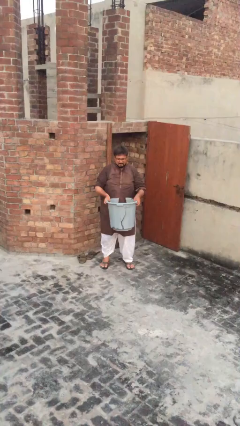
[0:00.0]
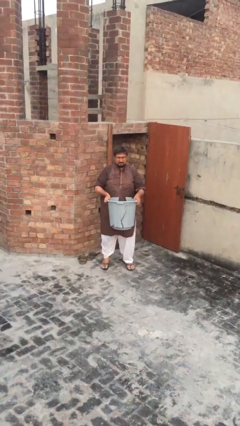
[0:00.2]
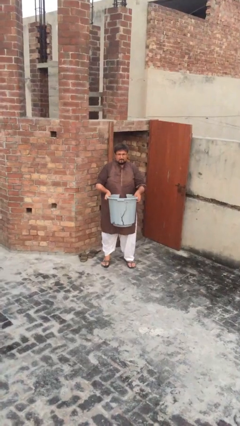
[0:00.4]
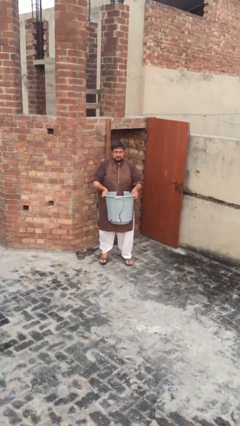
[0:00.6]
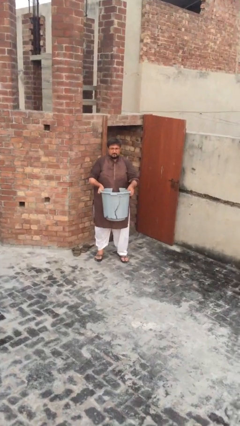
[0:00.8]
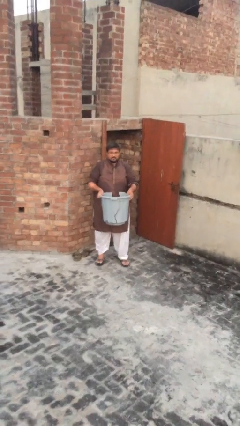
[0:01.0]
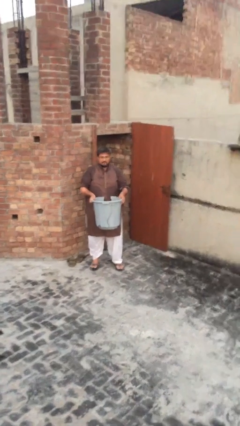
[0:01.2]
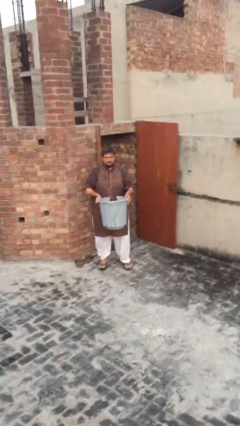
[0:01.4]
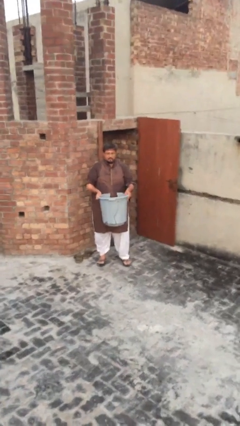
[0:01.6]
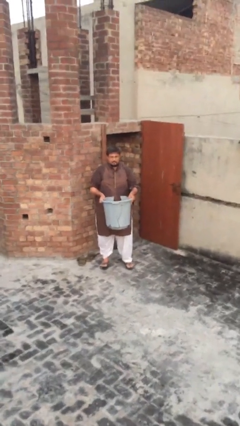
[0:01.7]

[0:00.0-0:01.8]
person picks up object from floor

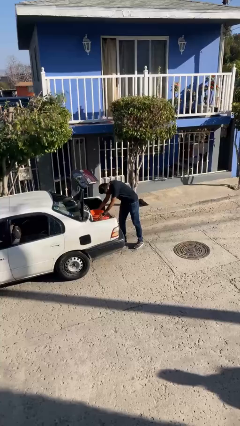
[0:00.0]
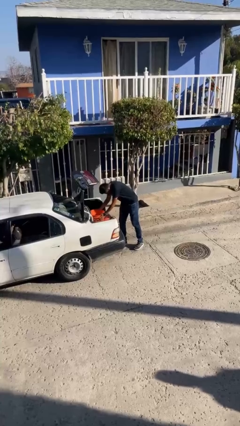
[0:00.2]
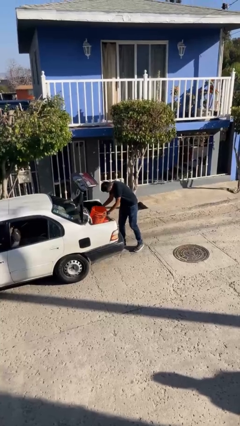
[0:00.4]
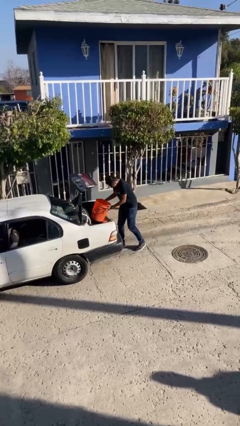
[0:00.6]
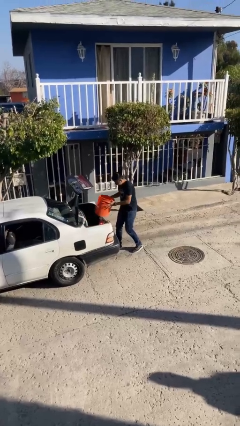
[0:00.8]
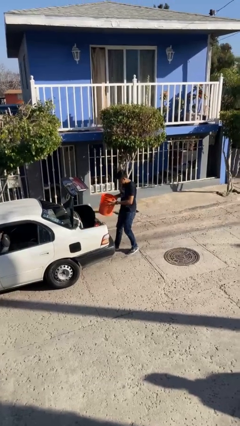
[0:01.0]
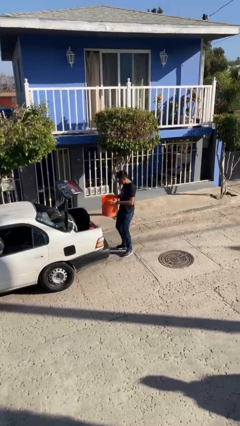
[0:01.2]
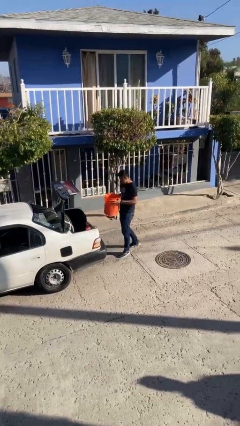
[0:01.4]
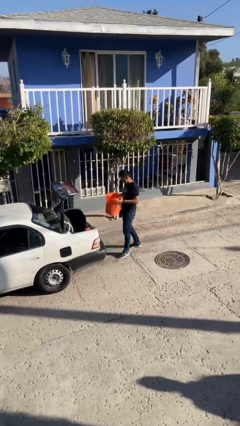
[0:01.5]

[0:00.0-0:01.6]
person unloads car

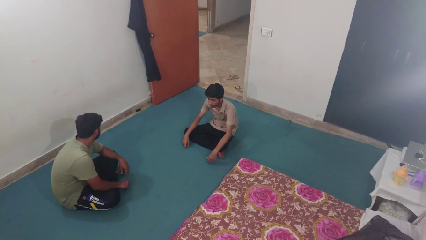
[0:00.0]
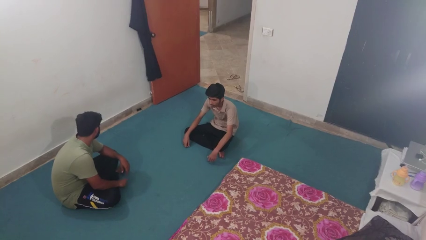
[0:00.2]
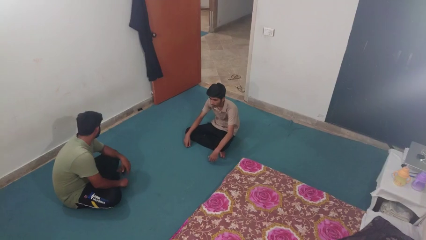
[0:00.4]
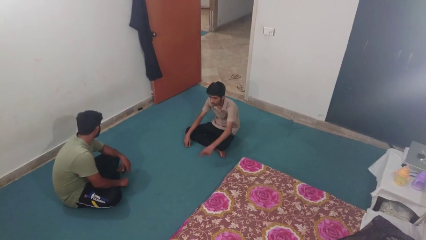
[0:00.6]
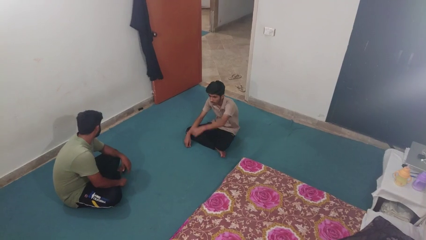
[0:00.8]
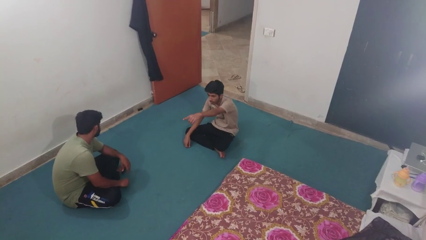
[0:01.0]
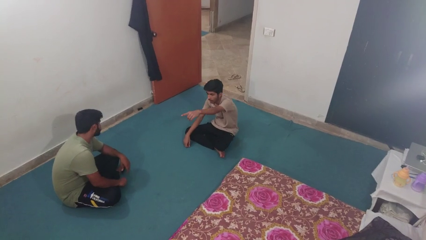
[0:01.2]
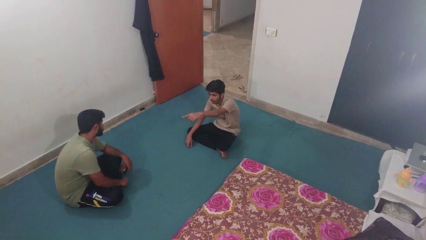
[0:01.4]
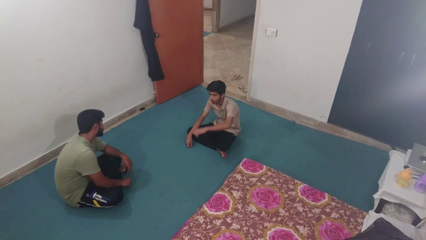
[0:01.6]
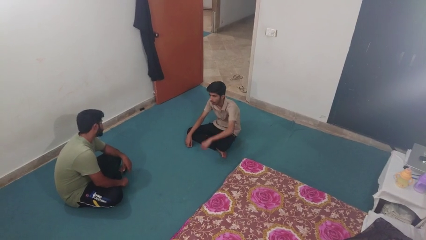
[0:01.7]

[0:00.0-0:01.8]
person points at person

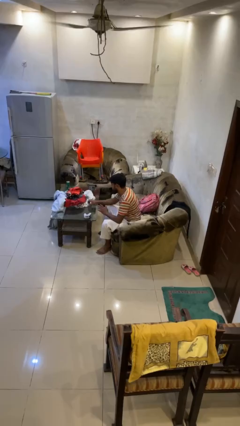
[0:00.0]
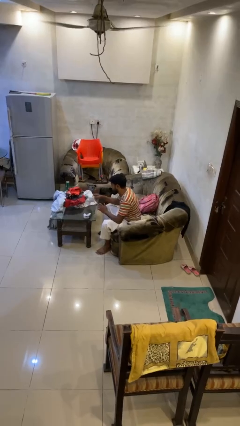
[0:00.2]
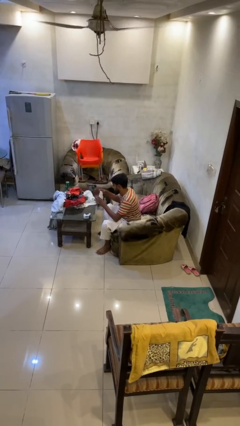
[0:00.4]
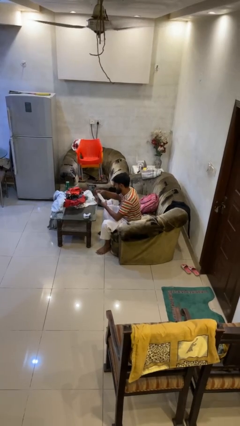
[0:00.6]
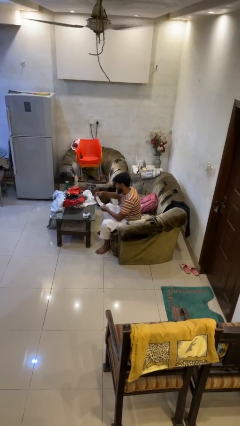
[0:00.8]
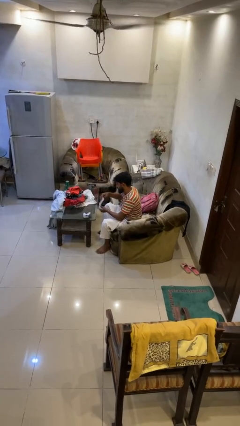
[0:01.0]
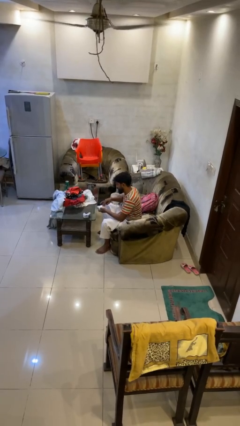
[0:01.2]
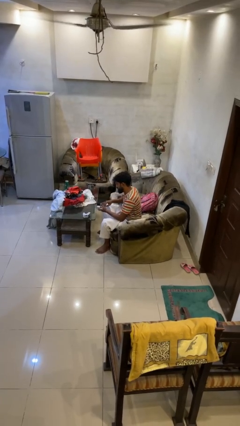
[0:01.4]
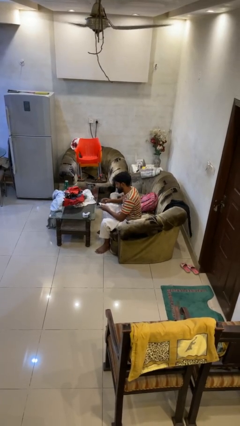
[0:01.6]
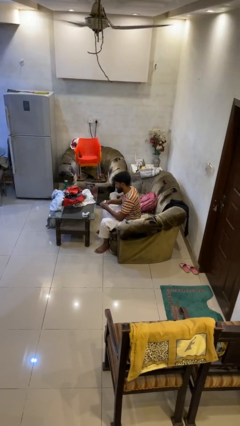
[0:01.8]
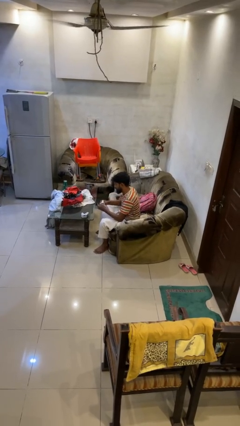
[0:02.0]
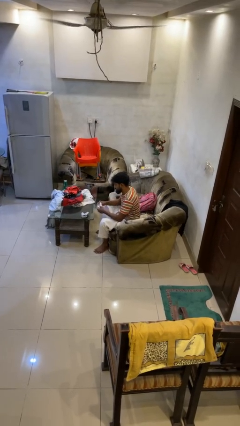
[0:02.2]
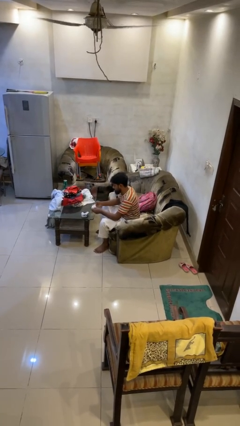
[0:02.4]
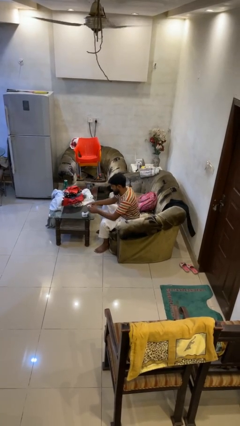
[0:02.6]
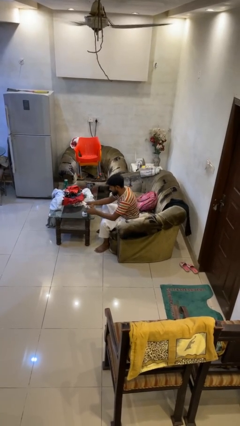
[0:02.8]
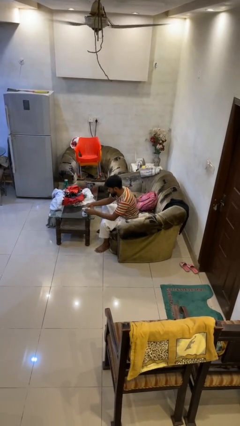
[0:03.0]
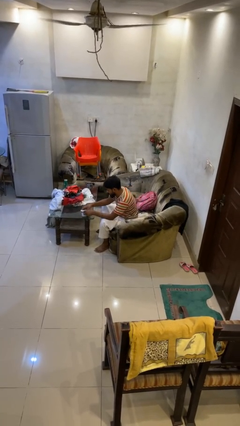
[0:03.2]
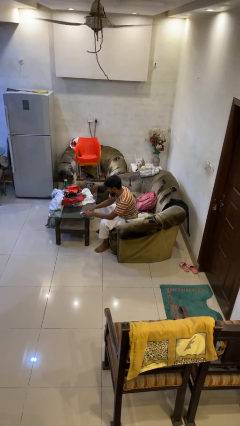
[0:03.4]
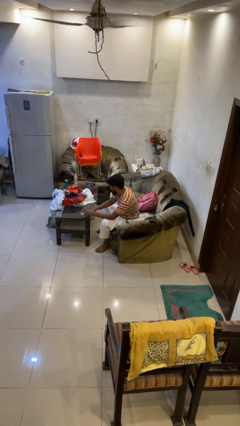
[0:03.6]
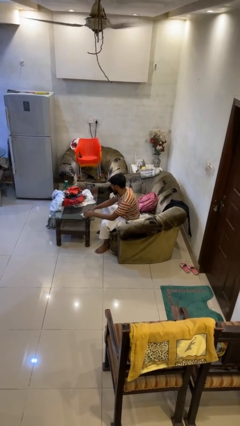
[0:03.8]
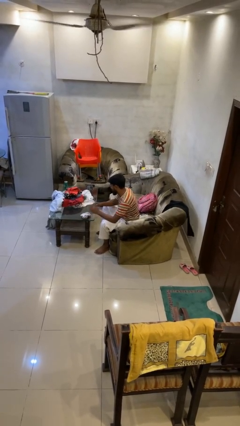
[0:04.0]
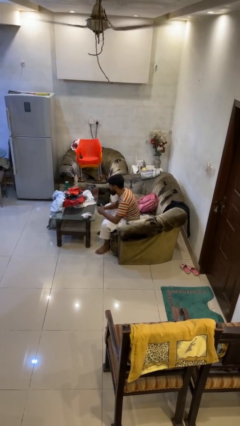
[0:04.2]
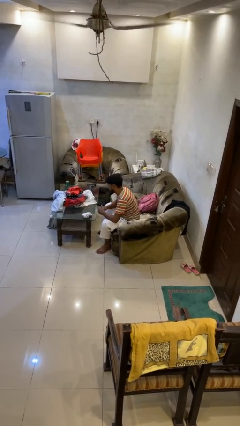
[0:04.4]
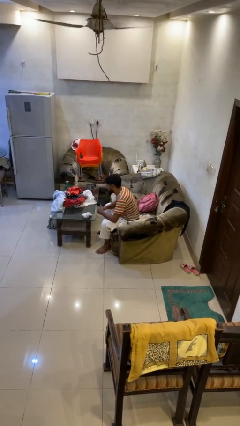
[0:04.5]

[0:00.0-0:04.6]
person folds socks

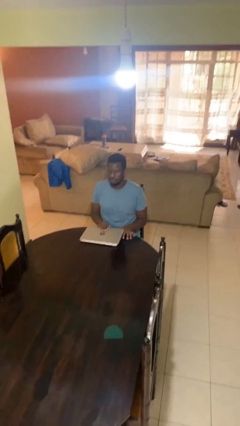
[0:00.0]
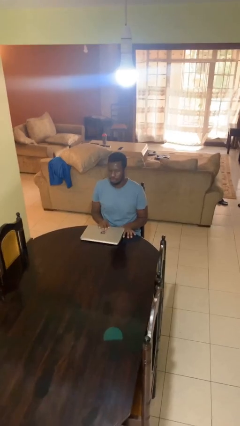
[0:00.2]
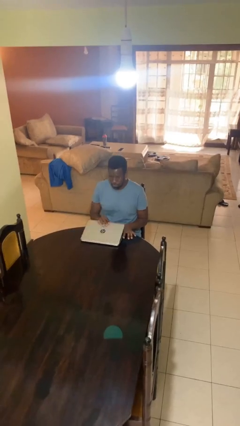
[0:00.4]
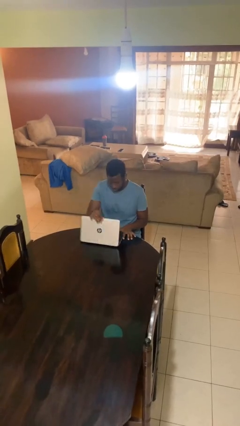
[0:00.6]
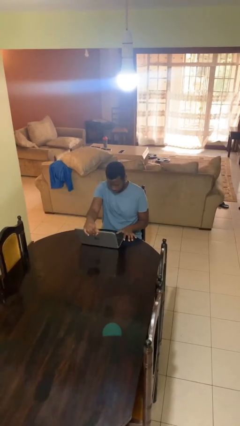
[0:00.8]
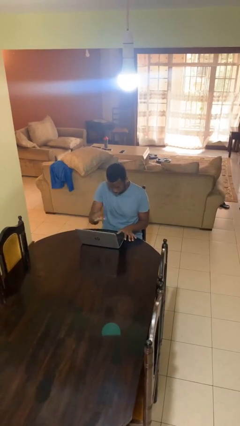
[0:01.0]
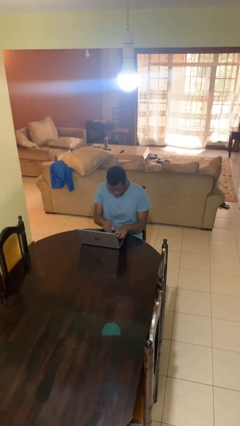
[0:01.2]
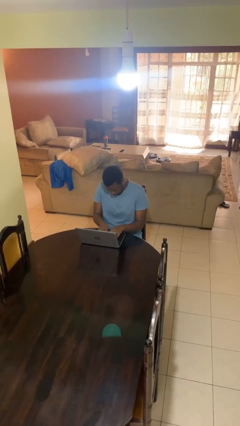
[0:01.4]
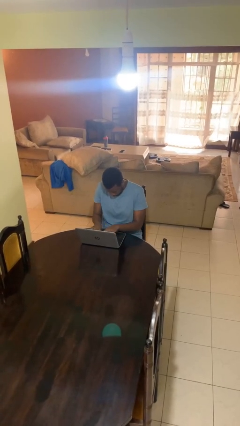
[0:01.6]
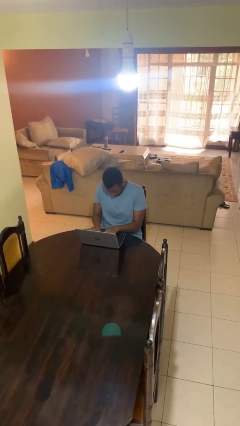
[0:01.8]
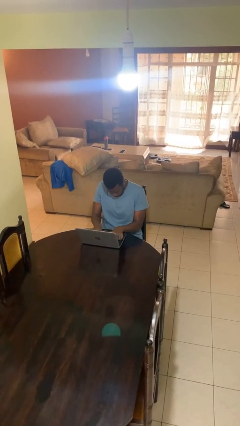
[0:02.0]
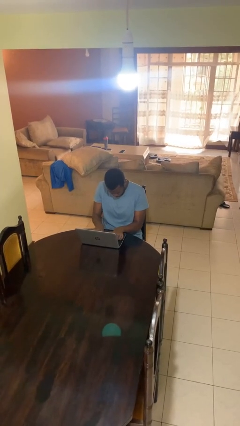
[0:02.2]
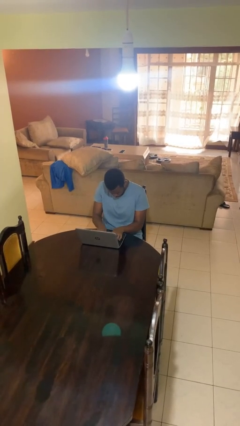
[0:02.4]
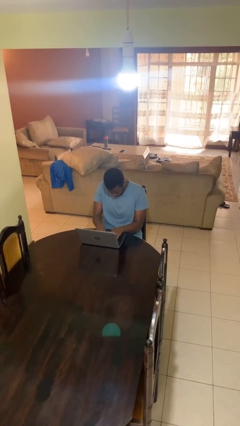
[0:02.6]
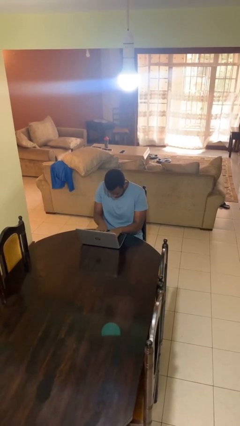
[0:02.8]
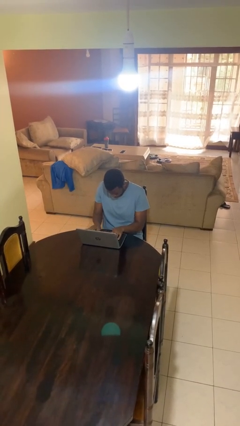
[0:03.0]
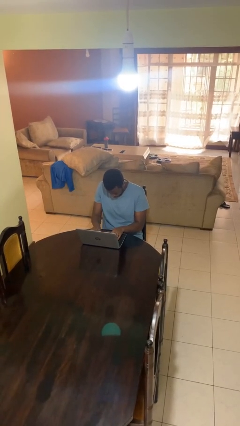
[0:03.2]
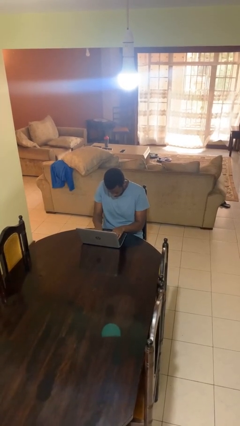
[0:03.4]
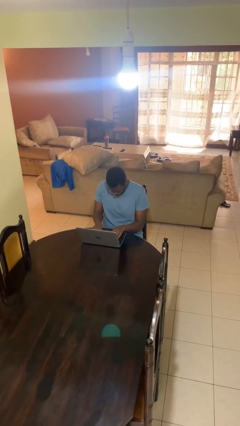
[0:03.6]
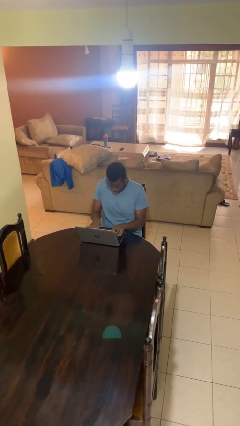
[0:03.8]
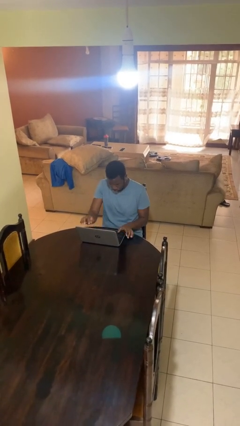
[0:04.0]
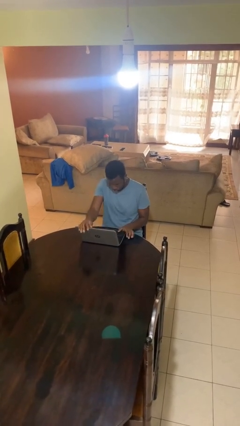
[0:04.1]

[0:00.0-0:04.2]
person interacts with laptop

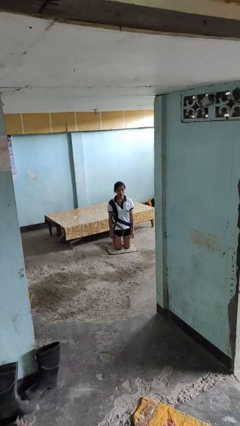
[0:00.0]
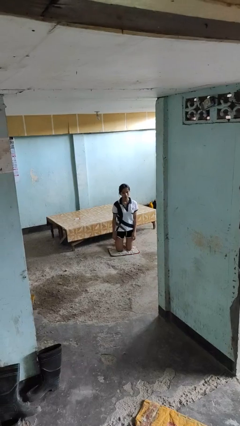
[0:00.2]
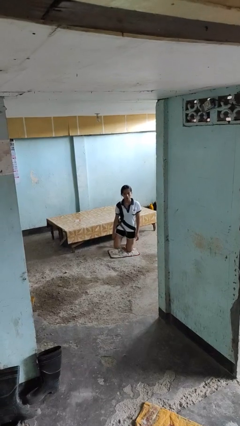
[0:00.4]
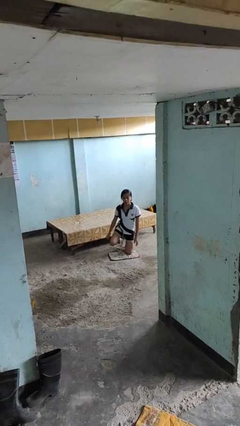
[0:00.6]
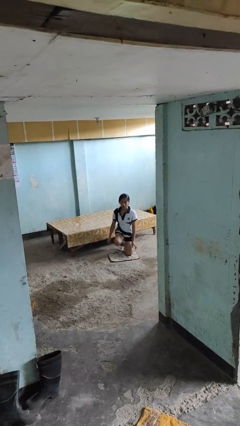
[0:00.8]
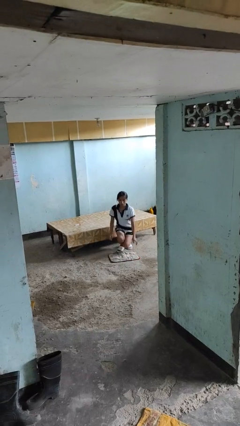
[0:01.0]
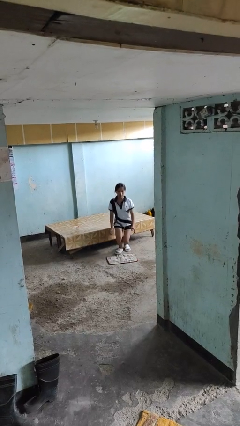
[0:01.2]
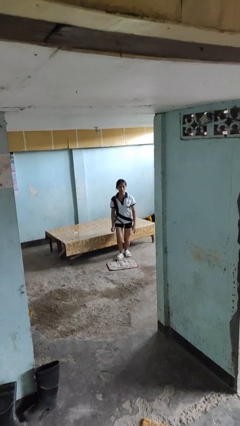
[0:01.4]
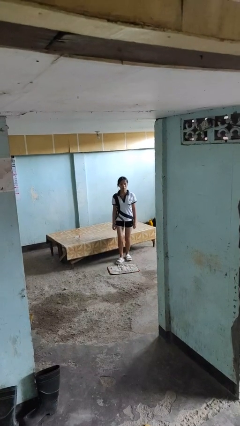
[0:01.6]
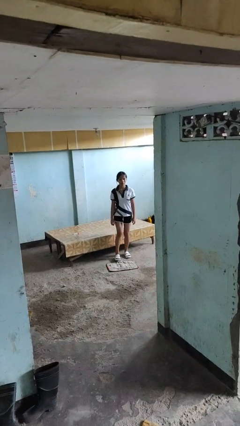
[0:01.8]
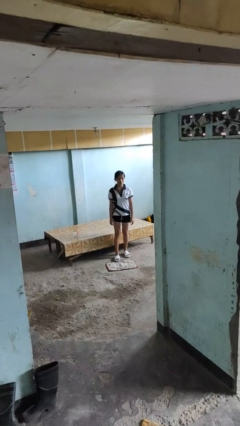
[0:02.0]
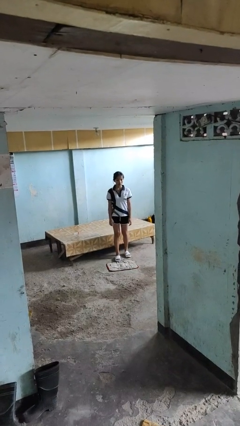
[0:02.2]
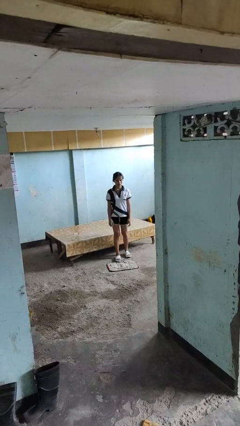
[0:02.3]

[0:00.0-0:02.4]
person stands up from floor

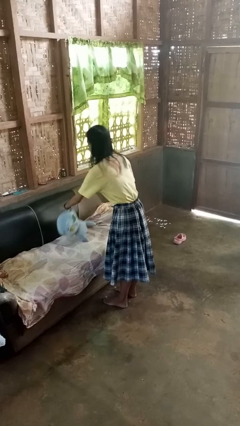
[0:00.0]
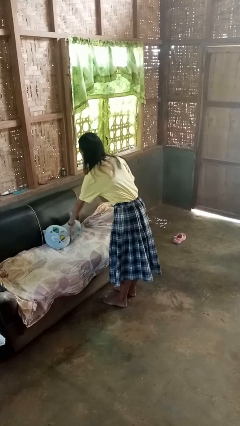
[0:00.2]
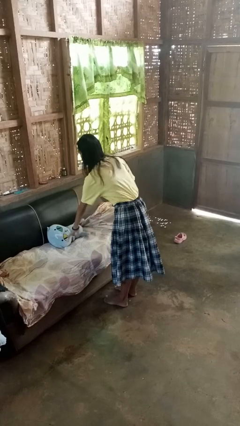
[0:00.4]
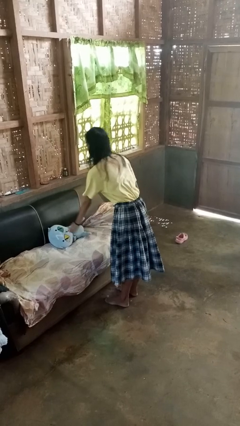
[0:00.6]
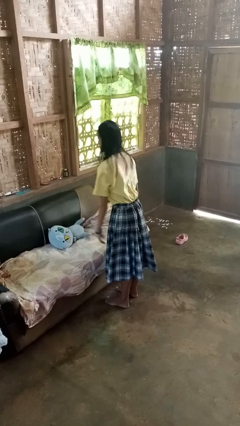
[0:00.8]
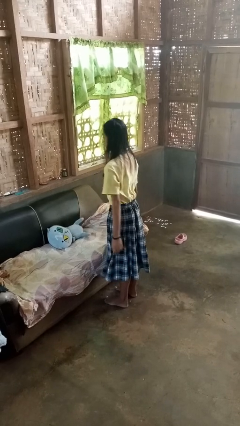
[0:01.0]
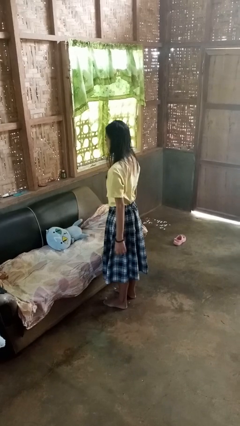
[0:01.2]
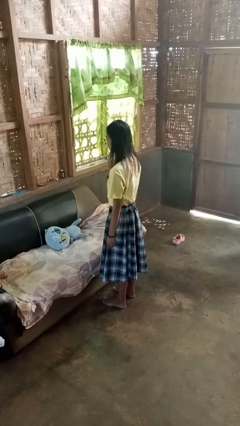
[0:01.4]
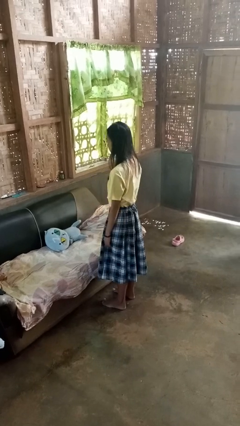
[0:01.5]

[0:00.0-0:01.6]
person puts down object on couch
